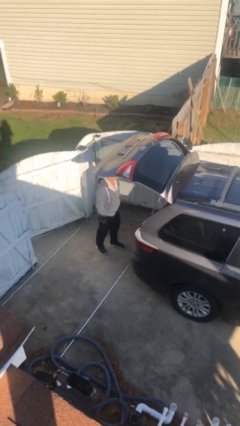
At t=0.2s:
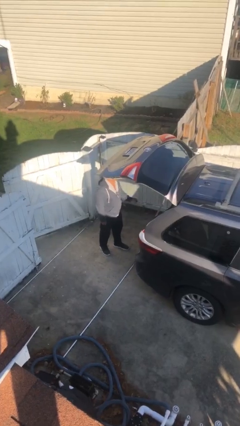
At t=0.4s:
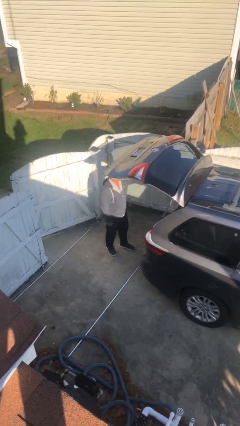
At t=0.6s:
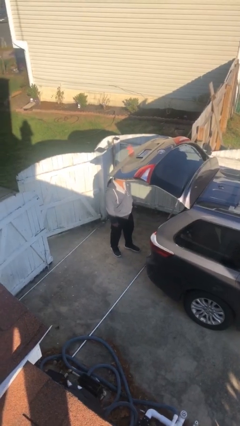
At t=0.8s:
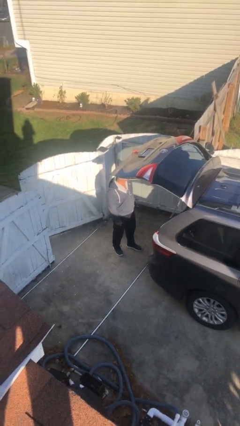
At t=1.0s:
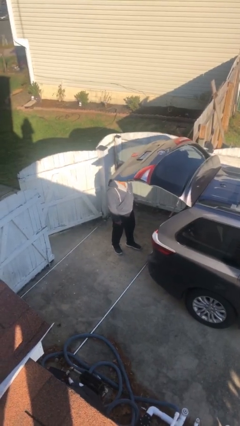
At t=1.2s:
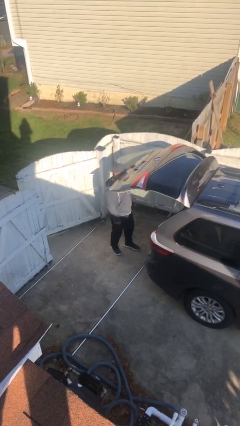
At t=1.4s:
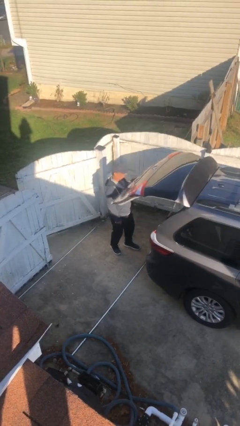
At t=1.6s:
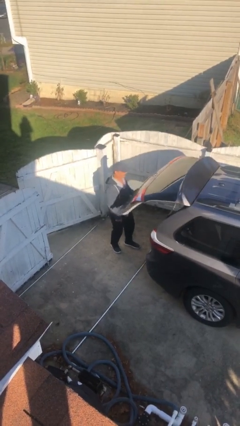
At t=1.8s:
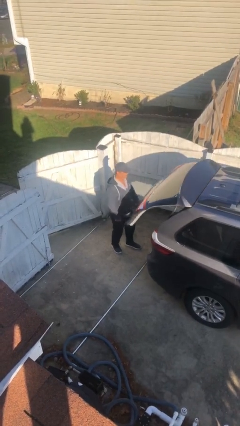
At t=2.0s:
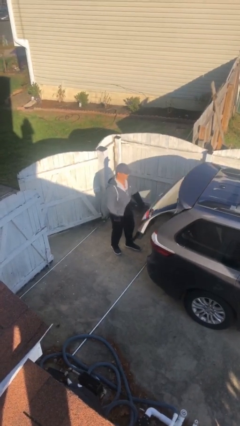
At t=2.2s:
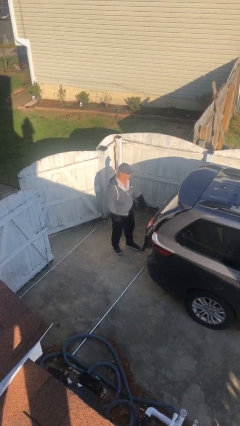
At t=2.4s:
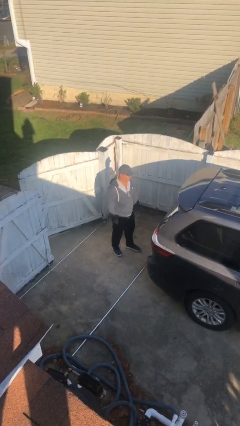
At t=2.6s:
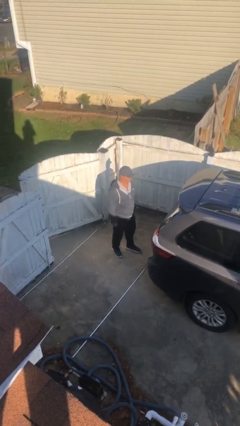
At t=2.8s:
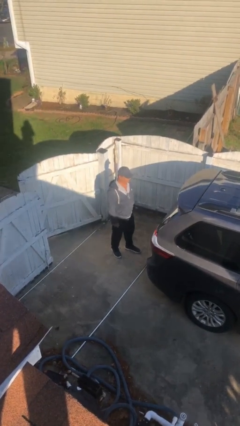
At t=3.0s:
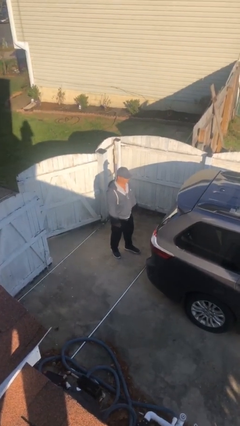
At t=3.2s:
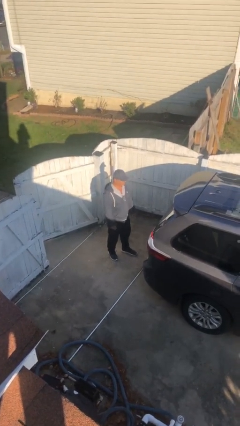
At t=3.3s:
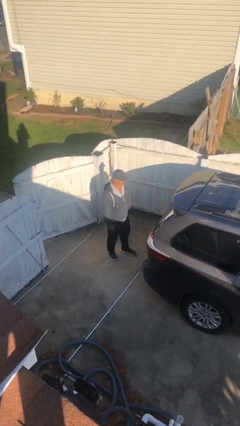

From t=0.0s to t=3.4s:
person closes car trunk

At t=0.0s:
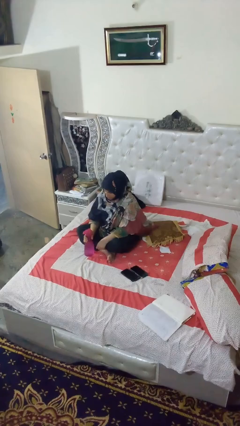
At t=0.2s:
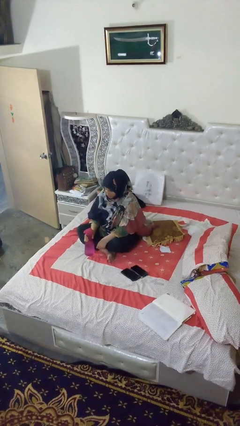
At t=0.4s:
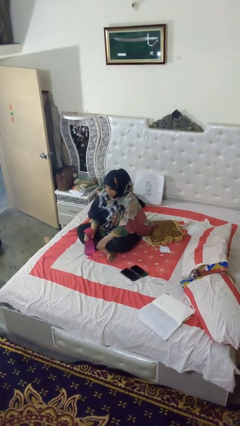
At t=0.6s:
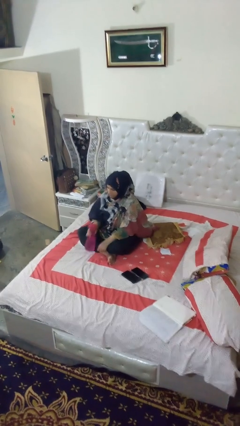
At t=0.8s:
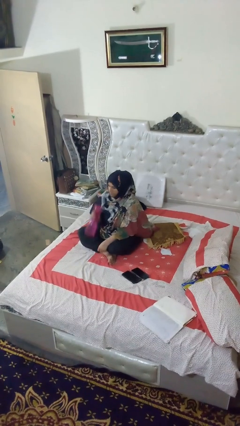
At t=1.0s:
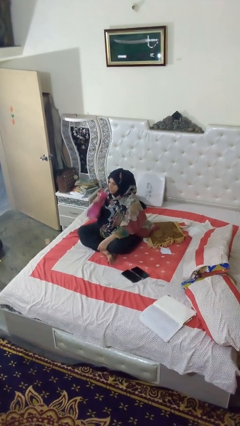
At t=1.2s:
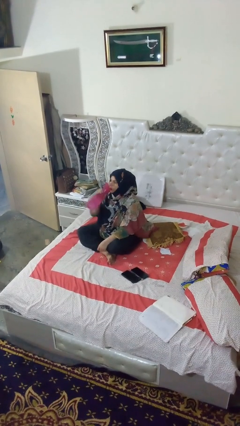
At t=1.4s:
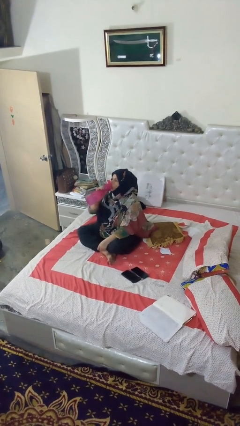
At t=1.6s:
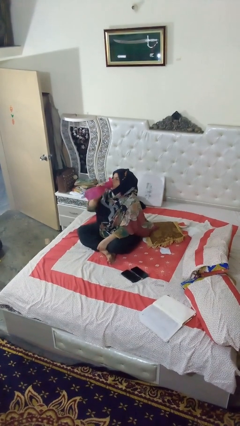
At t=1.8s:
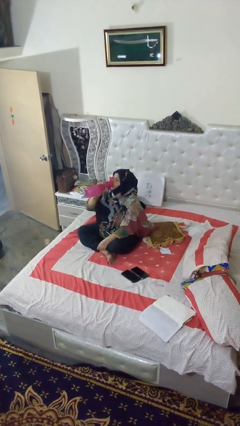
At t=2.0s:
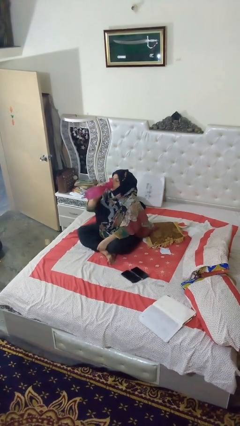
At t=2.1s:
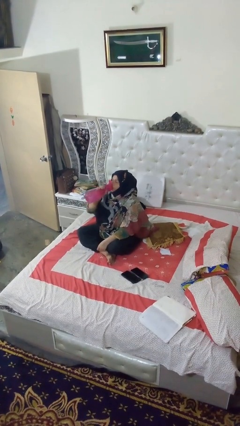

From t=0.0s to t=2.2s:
person drinks from bottle

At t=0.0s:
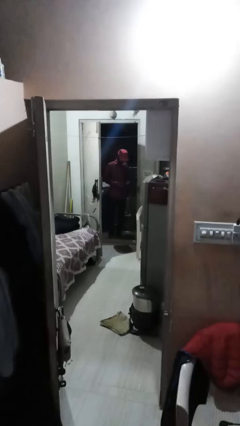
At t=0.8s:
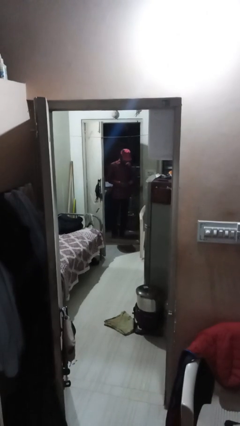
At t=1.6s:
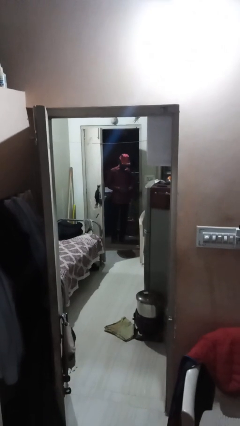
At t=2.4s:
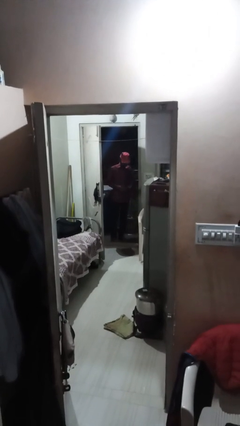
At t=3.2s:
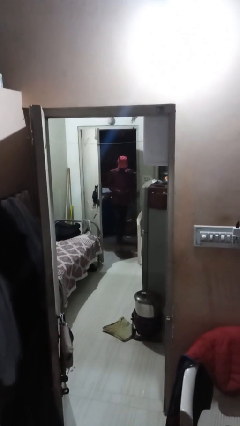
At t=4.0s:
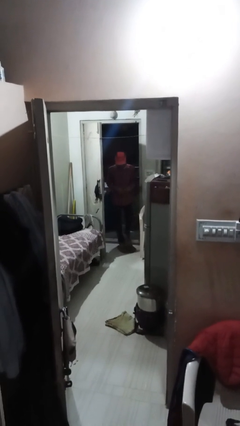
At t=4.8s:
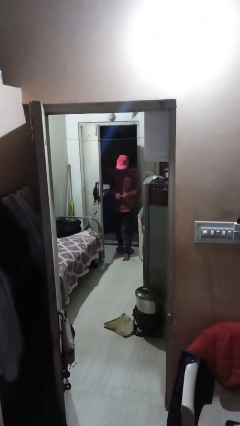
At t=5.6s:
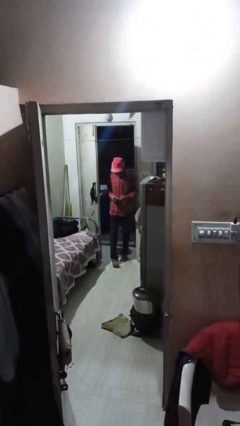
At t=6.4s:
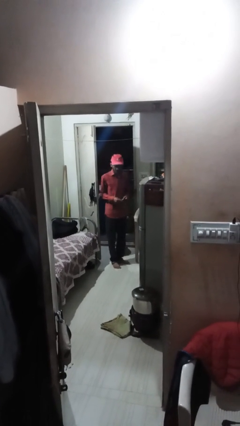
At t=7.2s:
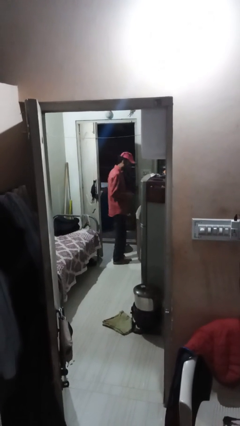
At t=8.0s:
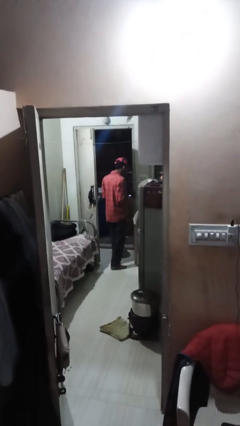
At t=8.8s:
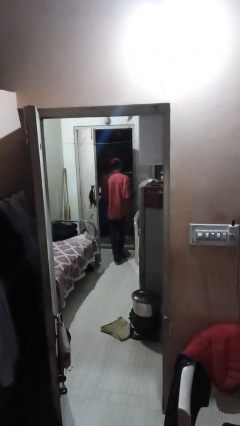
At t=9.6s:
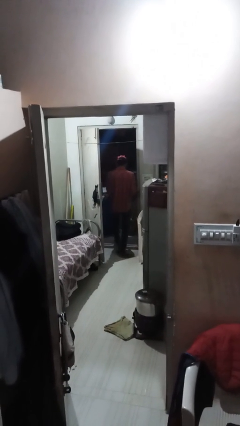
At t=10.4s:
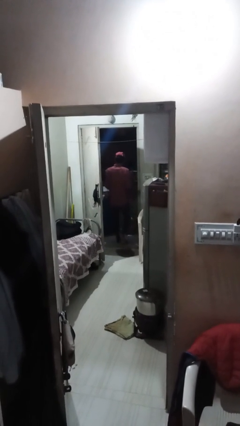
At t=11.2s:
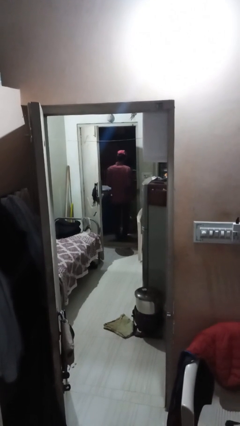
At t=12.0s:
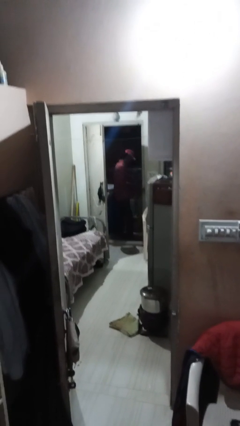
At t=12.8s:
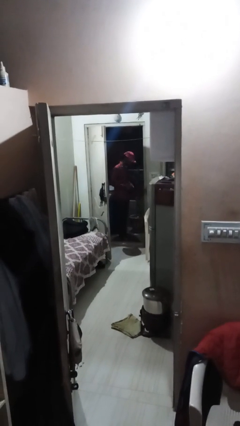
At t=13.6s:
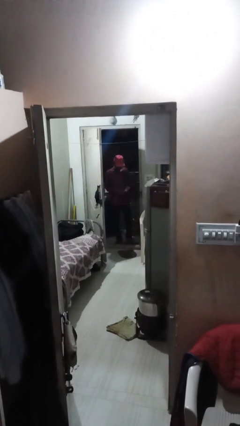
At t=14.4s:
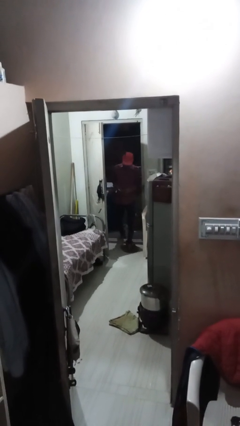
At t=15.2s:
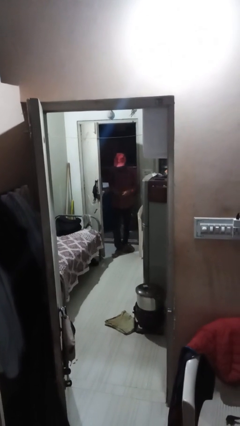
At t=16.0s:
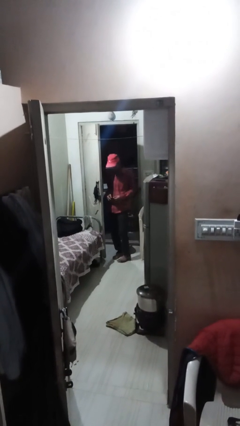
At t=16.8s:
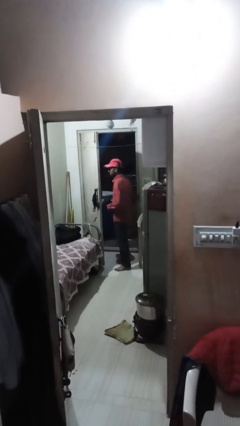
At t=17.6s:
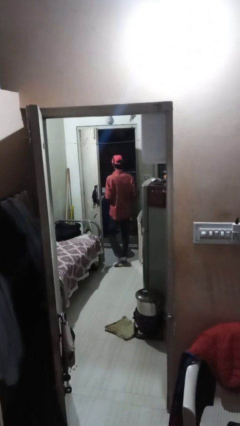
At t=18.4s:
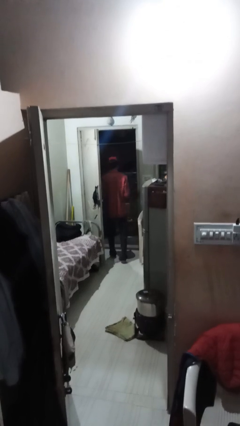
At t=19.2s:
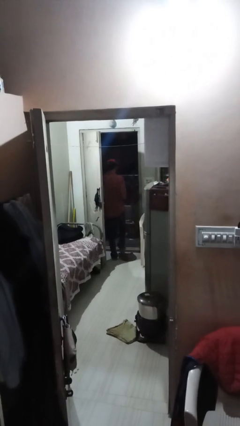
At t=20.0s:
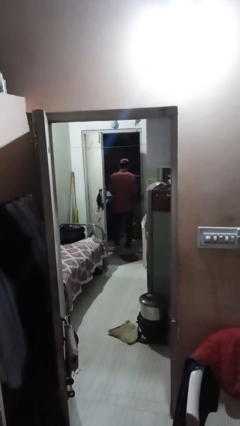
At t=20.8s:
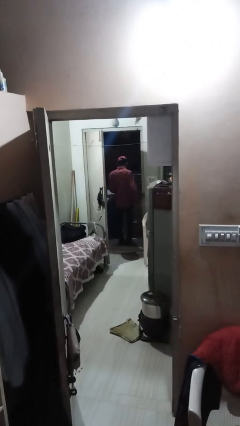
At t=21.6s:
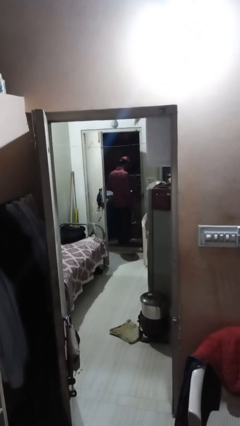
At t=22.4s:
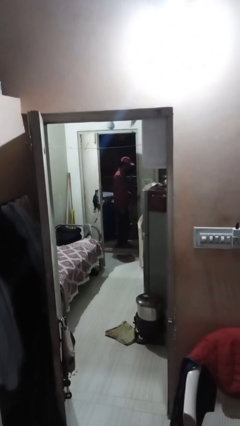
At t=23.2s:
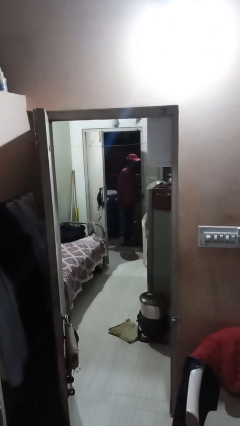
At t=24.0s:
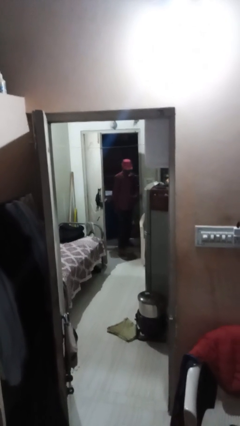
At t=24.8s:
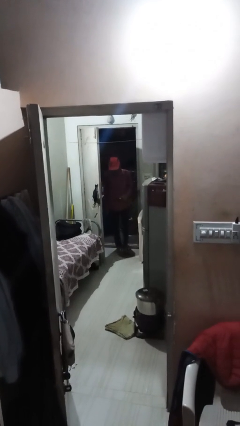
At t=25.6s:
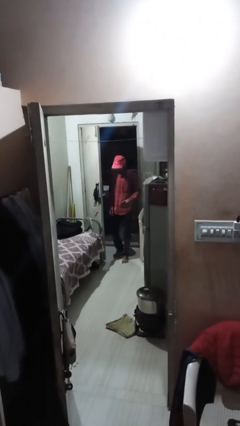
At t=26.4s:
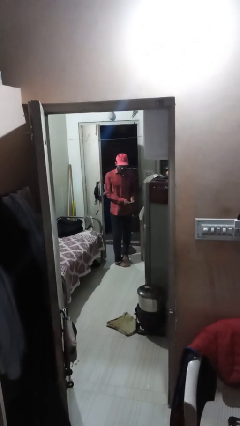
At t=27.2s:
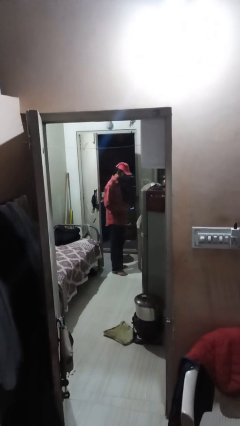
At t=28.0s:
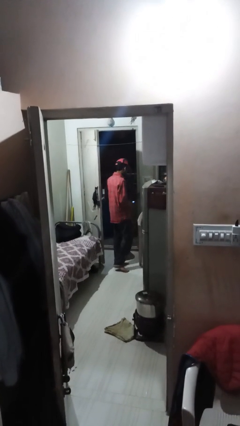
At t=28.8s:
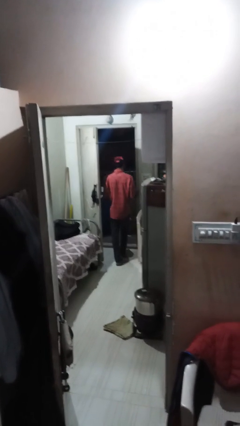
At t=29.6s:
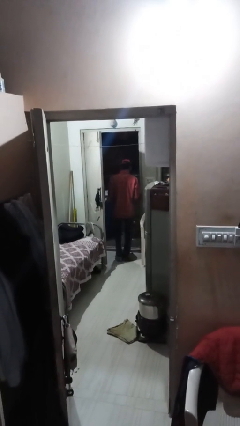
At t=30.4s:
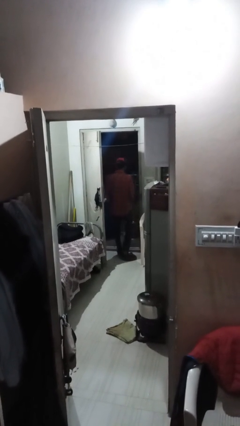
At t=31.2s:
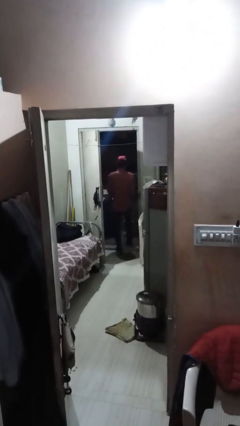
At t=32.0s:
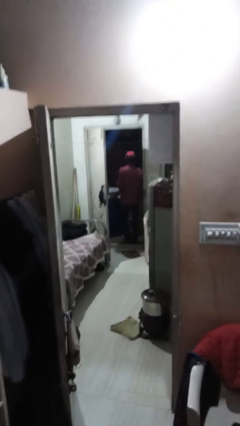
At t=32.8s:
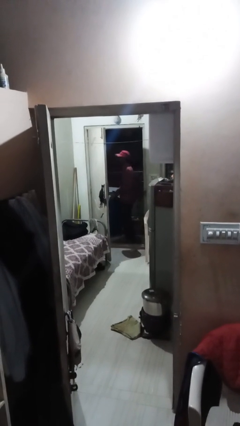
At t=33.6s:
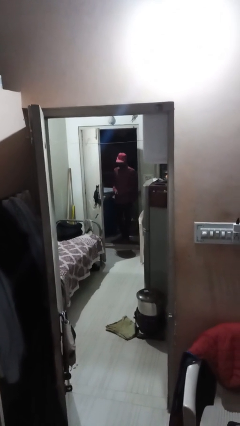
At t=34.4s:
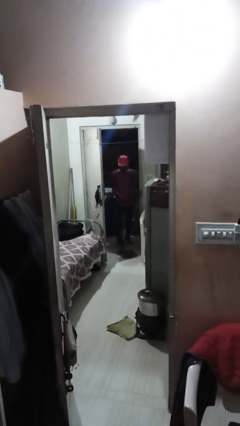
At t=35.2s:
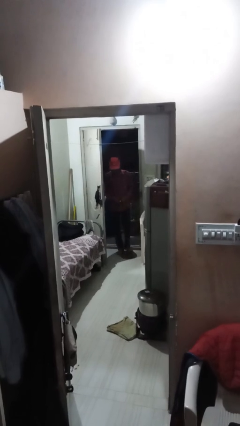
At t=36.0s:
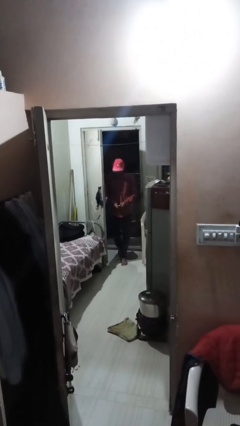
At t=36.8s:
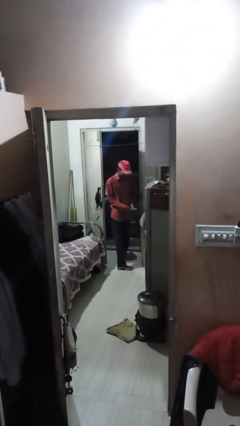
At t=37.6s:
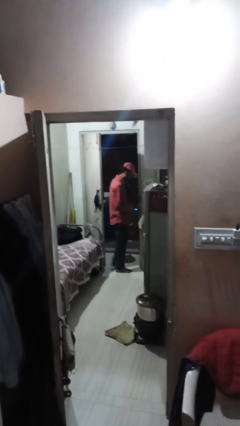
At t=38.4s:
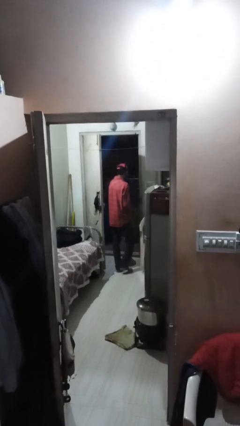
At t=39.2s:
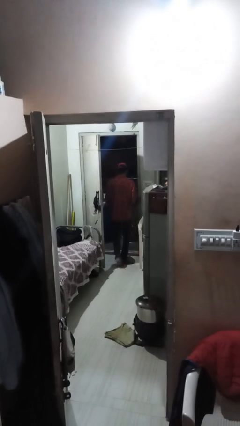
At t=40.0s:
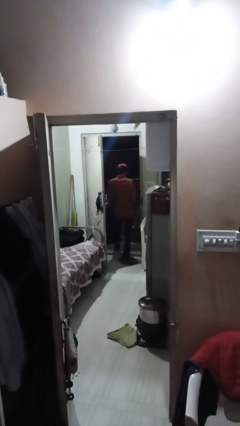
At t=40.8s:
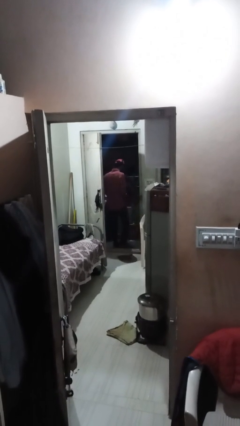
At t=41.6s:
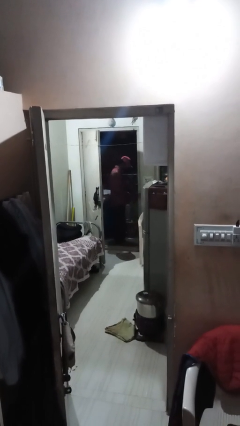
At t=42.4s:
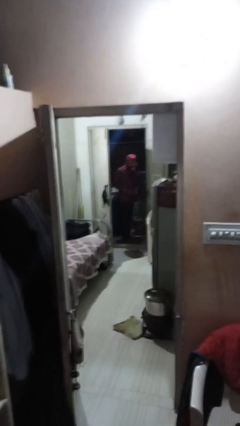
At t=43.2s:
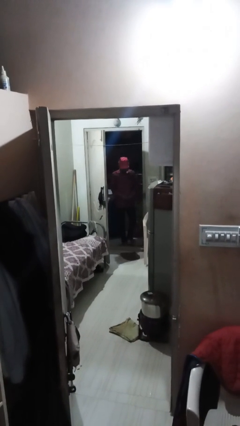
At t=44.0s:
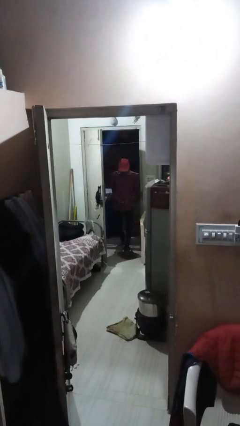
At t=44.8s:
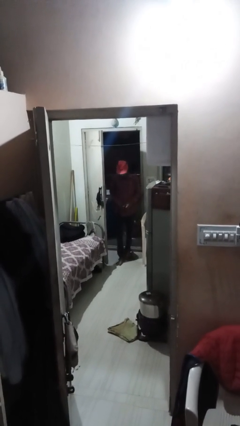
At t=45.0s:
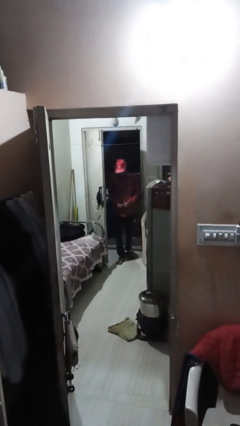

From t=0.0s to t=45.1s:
person texts on phone

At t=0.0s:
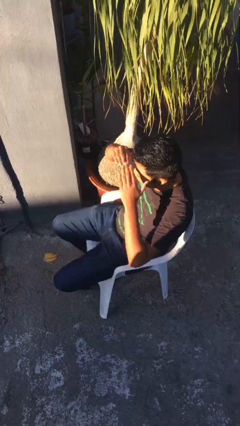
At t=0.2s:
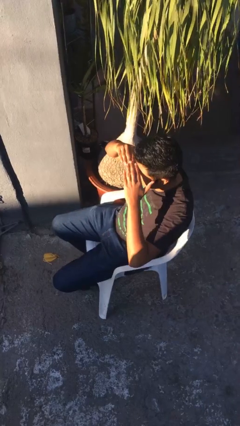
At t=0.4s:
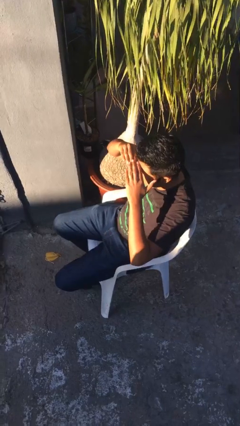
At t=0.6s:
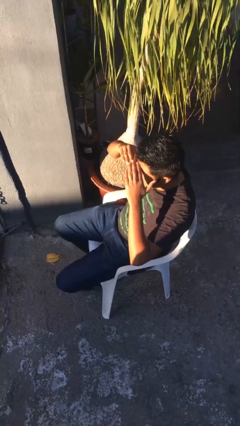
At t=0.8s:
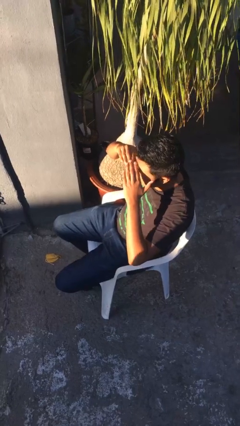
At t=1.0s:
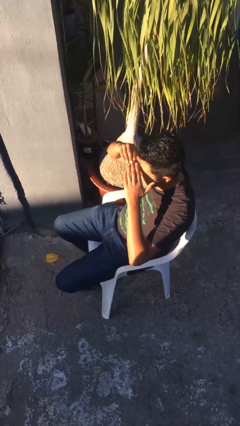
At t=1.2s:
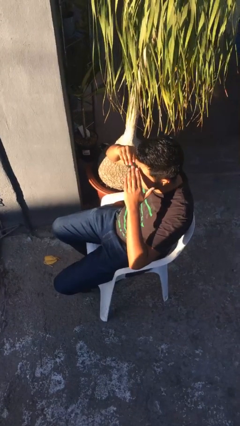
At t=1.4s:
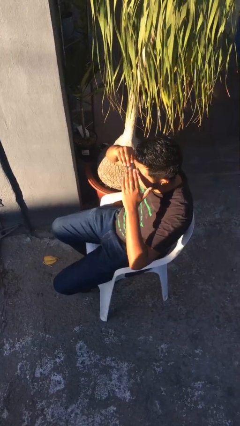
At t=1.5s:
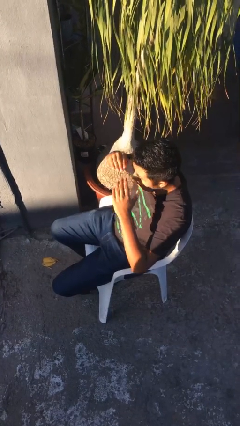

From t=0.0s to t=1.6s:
person shades eyes
